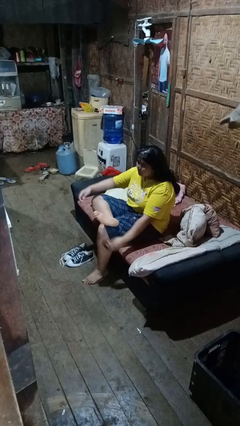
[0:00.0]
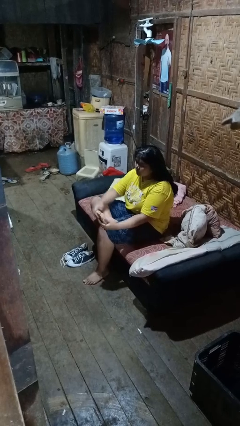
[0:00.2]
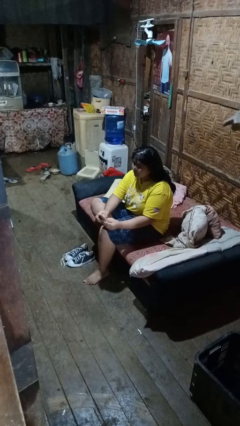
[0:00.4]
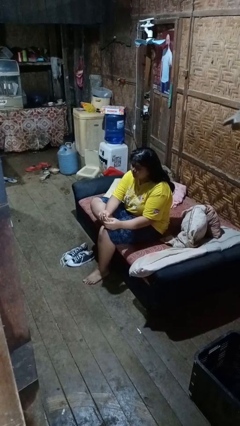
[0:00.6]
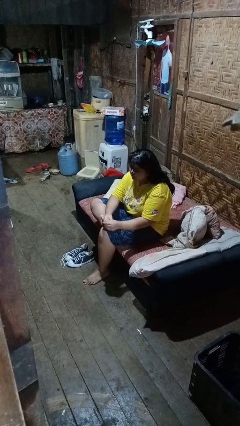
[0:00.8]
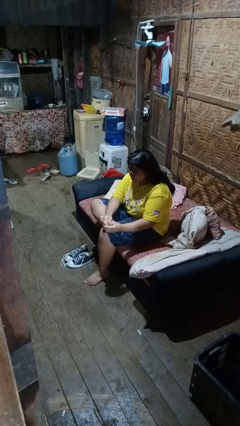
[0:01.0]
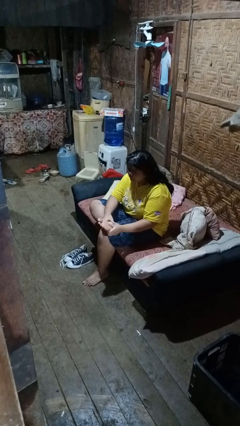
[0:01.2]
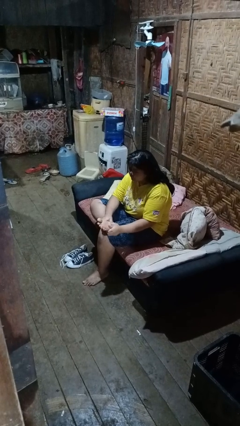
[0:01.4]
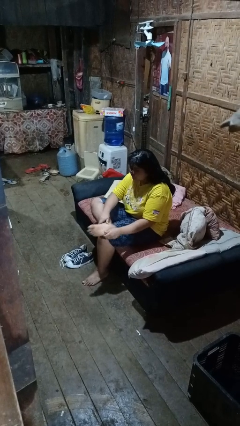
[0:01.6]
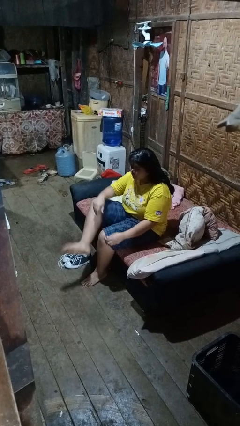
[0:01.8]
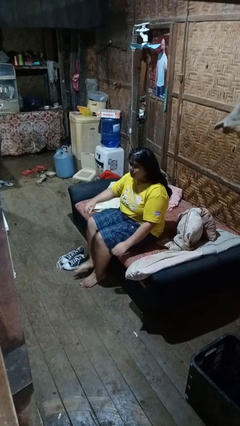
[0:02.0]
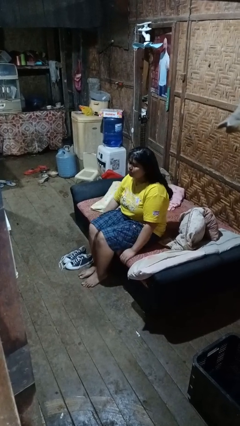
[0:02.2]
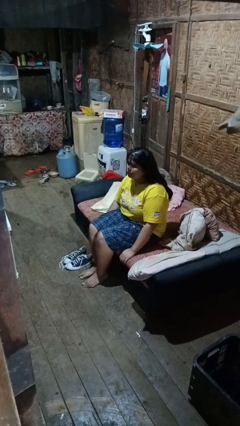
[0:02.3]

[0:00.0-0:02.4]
person rubs foot

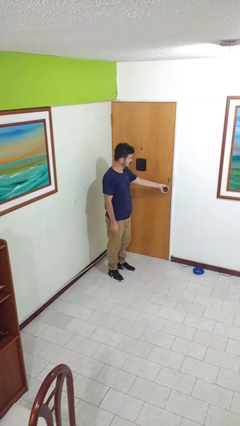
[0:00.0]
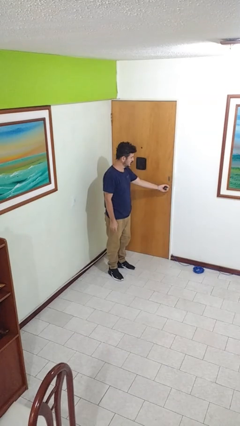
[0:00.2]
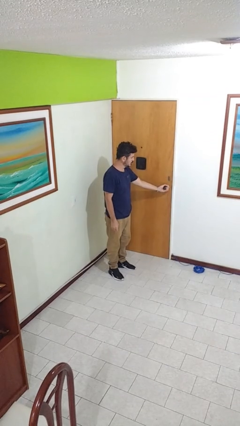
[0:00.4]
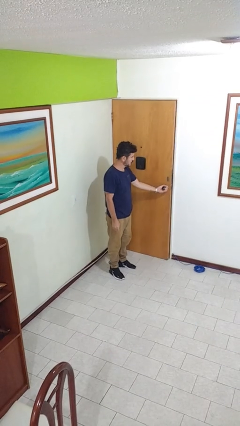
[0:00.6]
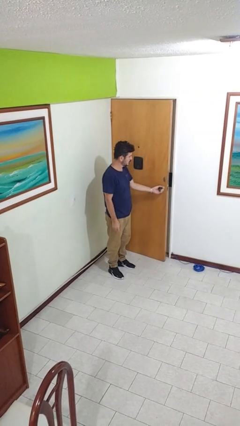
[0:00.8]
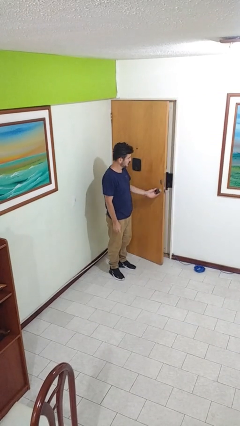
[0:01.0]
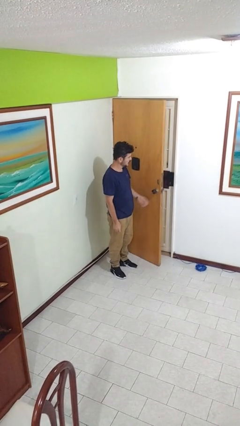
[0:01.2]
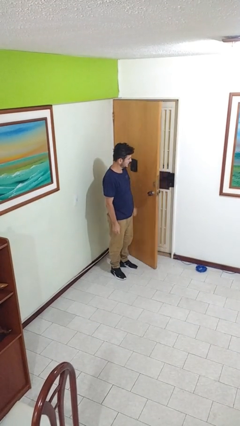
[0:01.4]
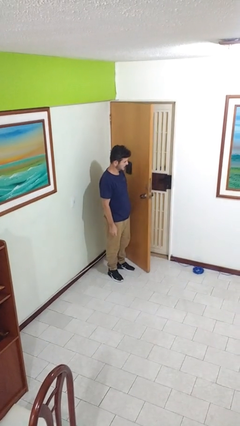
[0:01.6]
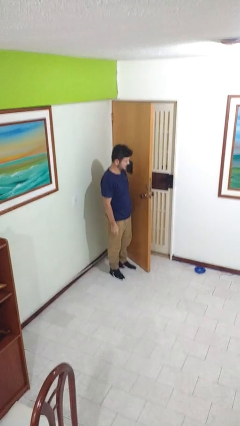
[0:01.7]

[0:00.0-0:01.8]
person opens facility door

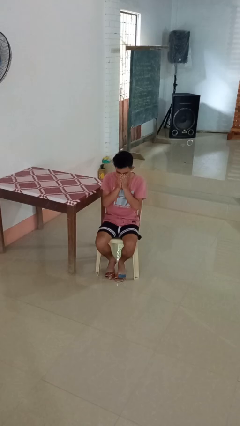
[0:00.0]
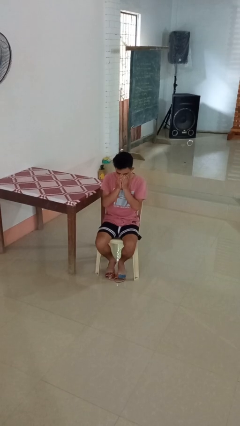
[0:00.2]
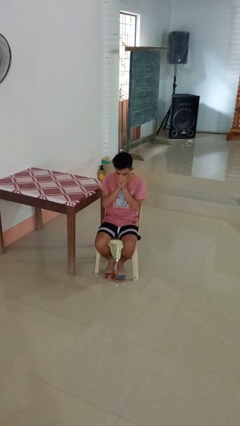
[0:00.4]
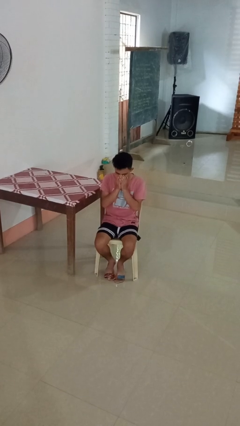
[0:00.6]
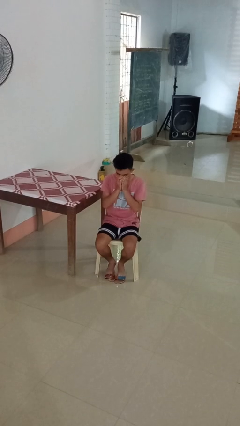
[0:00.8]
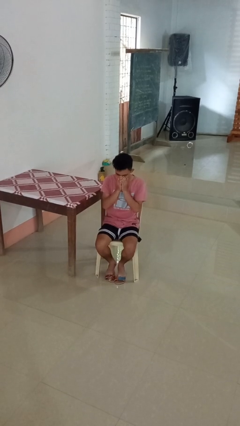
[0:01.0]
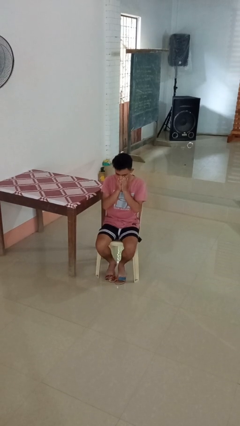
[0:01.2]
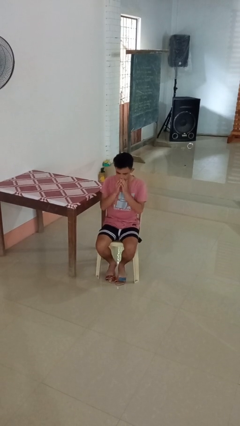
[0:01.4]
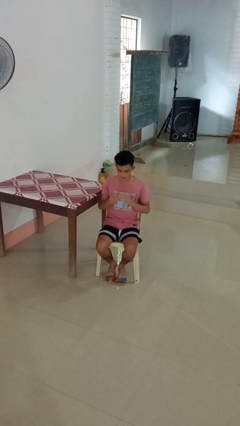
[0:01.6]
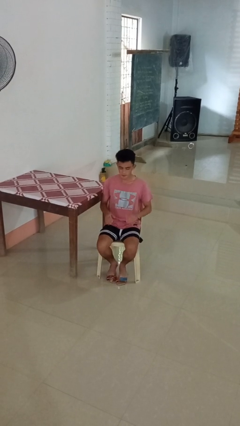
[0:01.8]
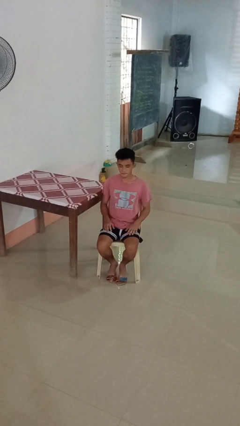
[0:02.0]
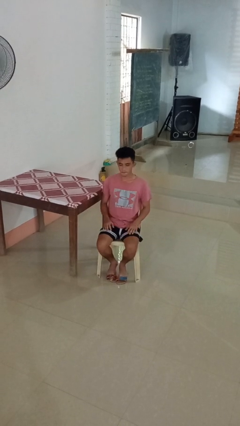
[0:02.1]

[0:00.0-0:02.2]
person sneezes into hand

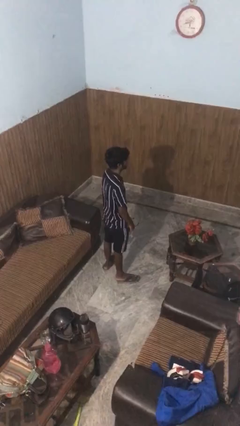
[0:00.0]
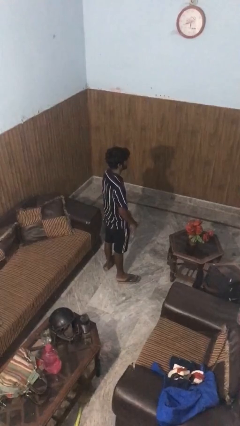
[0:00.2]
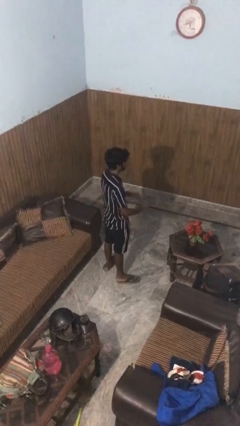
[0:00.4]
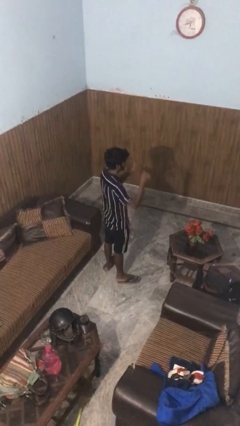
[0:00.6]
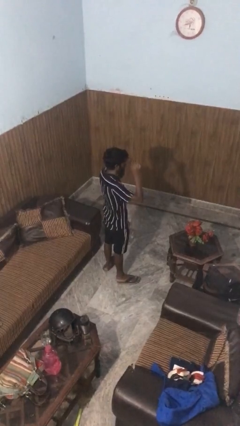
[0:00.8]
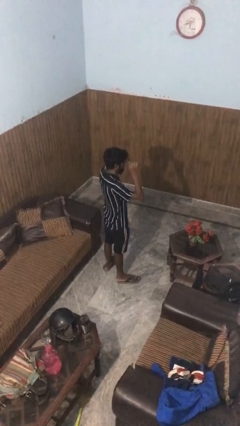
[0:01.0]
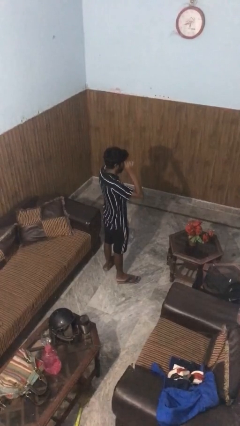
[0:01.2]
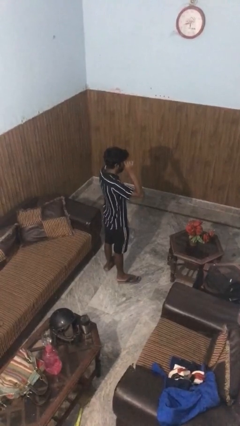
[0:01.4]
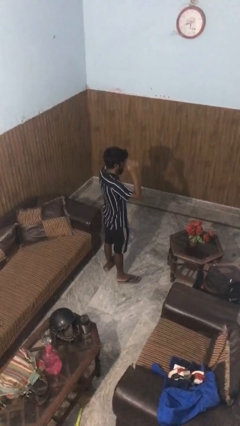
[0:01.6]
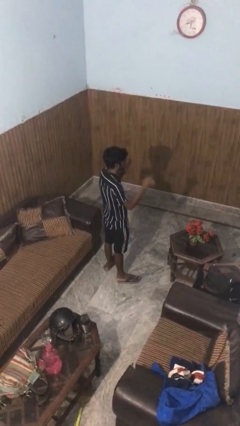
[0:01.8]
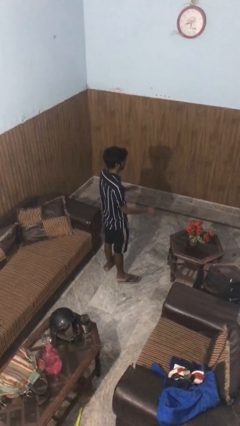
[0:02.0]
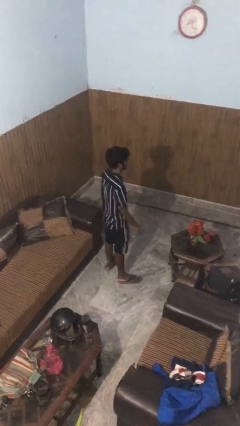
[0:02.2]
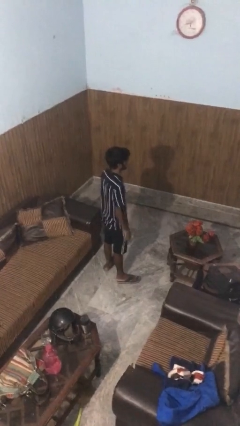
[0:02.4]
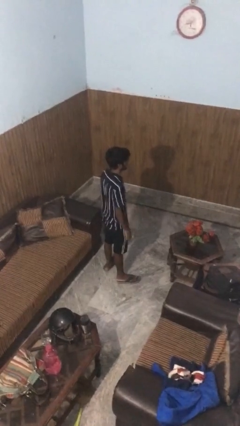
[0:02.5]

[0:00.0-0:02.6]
person puts on glasses

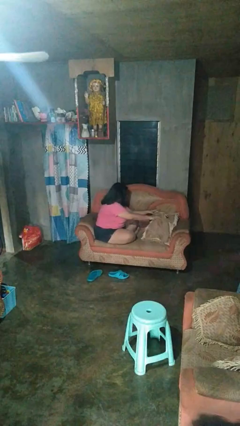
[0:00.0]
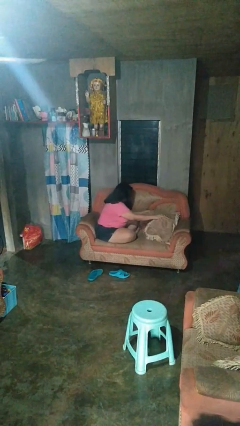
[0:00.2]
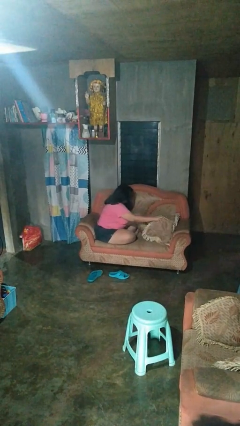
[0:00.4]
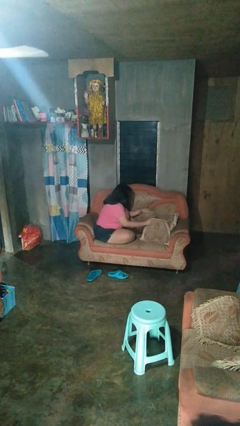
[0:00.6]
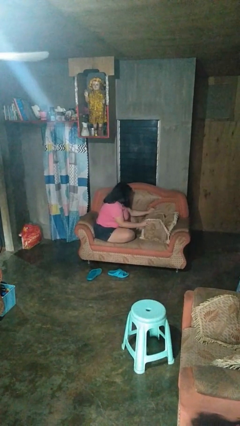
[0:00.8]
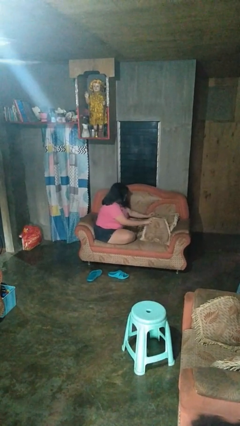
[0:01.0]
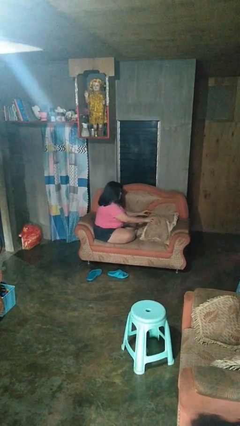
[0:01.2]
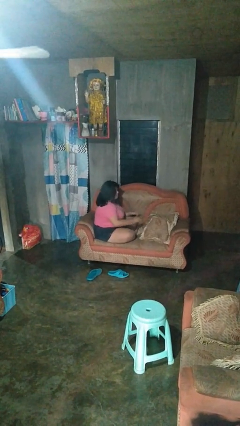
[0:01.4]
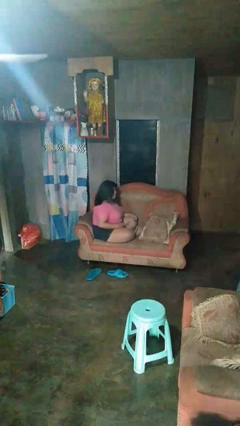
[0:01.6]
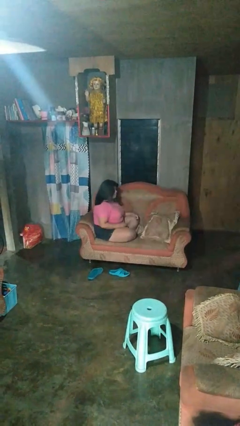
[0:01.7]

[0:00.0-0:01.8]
person searches in couch

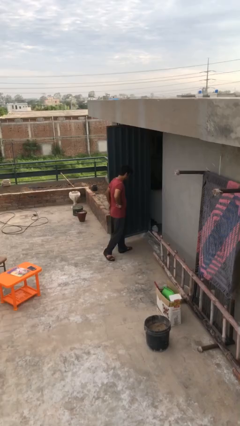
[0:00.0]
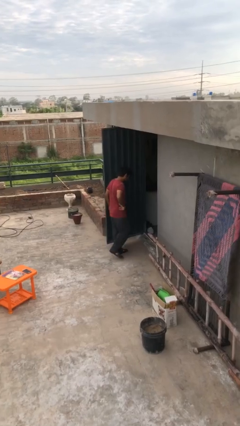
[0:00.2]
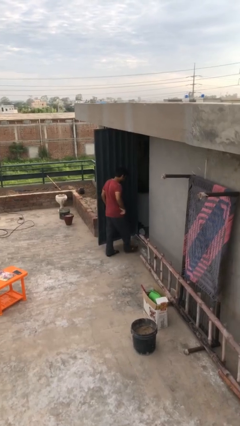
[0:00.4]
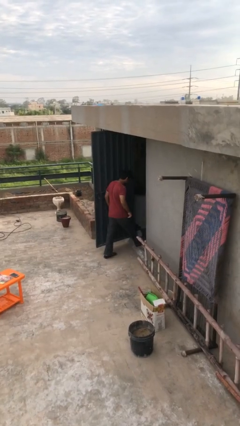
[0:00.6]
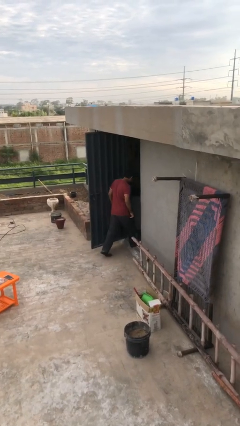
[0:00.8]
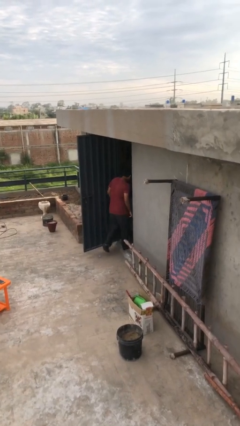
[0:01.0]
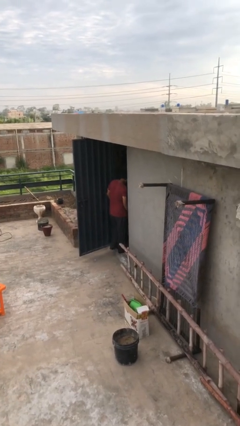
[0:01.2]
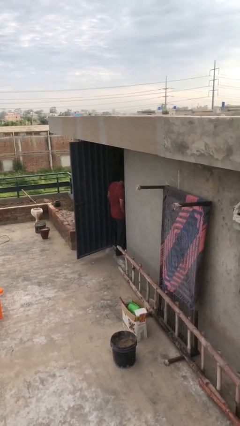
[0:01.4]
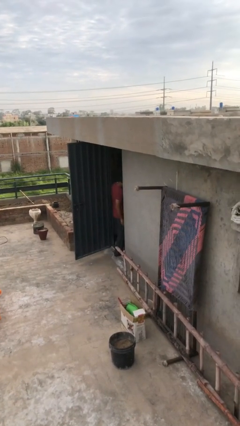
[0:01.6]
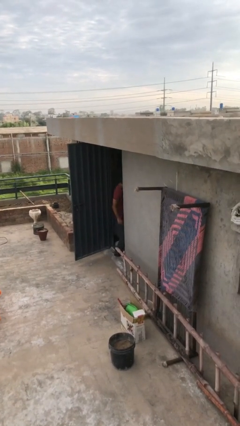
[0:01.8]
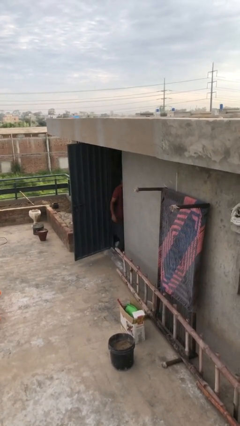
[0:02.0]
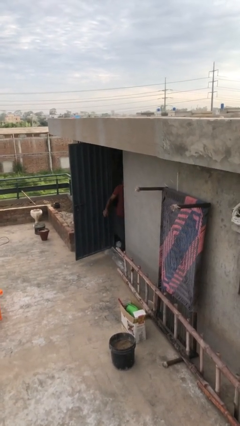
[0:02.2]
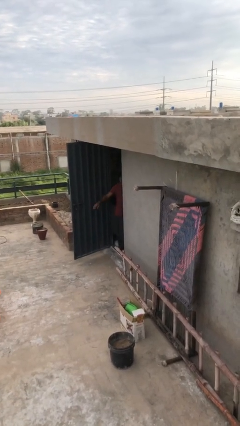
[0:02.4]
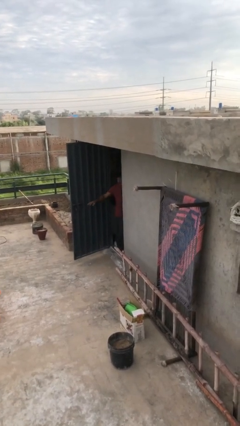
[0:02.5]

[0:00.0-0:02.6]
person exits scene through structure

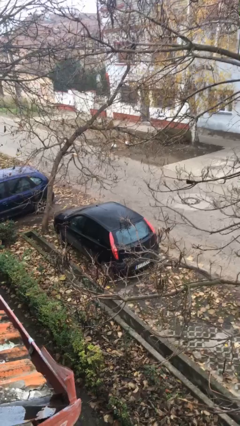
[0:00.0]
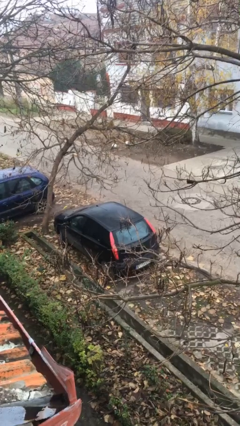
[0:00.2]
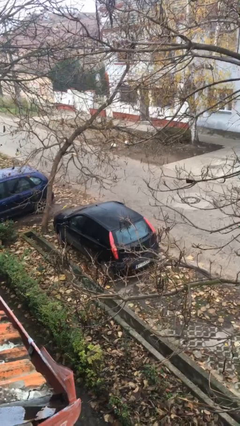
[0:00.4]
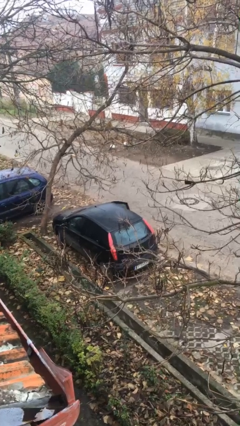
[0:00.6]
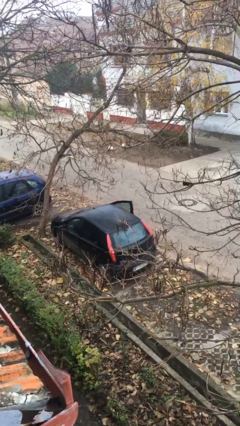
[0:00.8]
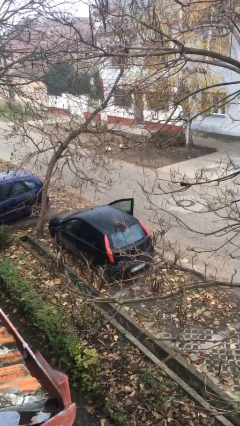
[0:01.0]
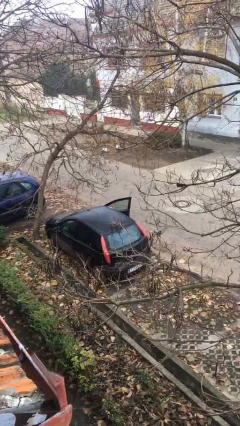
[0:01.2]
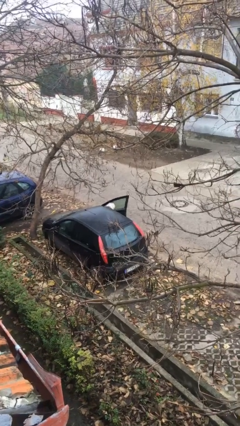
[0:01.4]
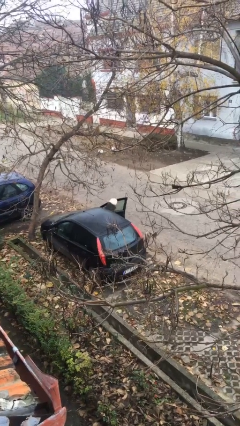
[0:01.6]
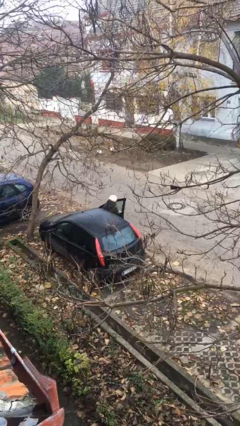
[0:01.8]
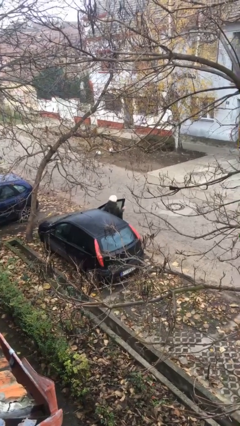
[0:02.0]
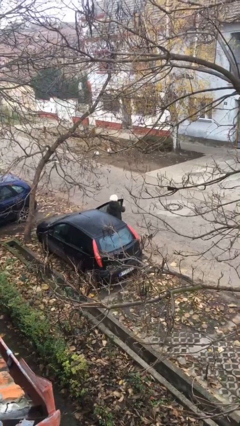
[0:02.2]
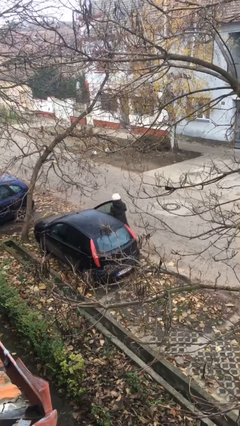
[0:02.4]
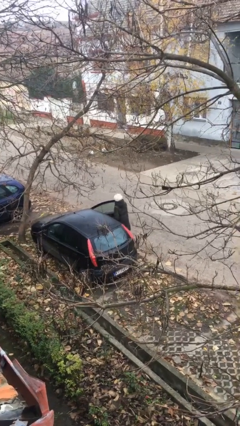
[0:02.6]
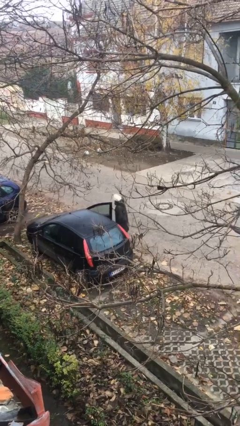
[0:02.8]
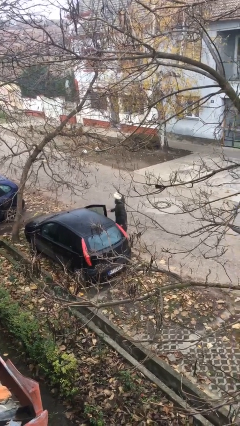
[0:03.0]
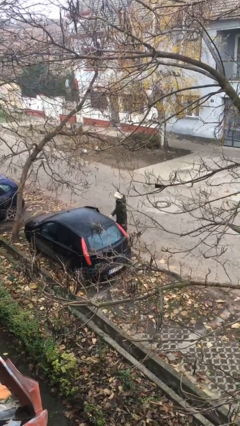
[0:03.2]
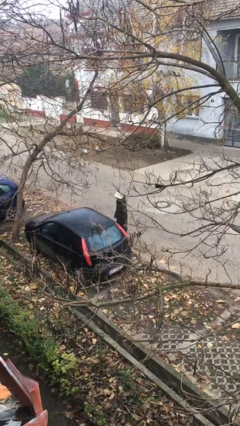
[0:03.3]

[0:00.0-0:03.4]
person exits car

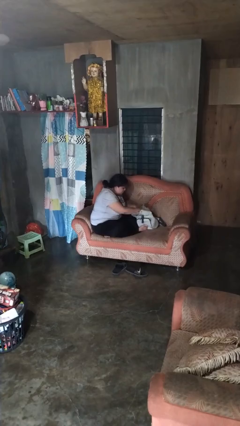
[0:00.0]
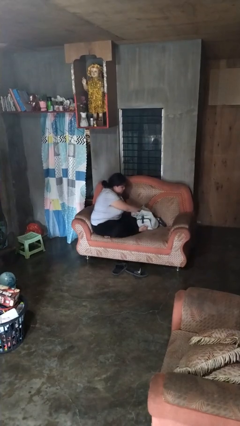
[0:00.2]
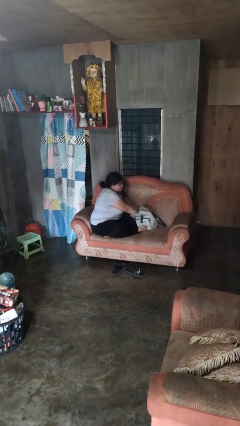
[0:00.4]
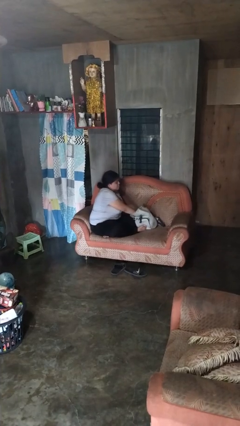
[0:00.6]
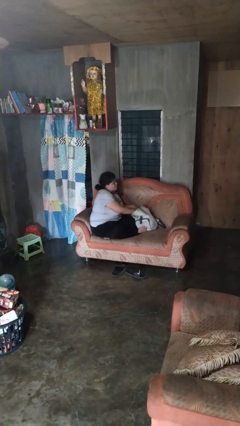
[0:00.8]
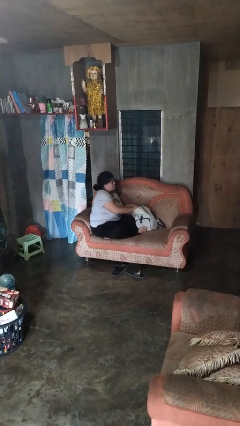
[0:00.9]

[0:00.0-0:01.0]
person takes object from backpack
